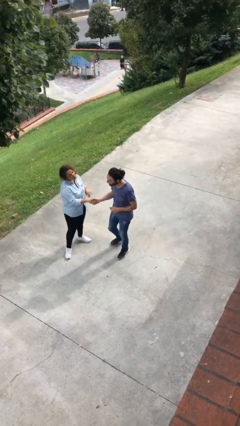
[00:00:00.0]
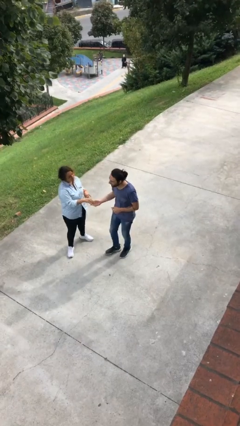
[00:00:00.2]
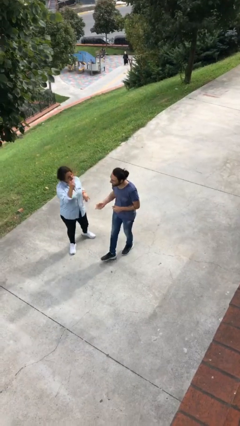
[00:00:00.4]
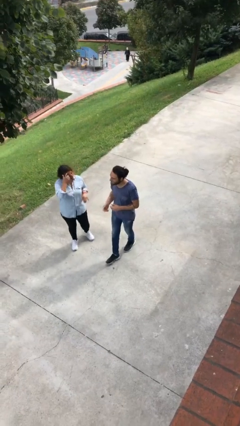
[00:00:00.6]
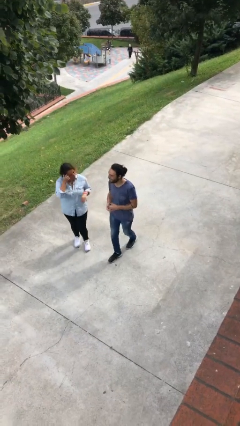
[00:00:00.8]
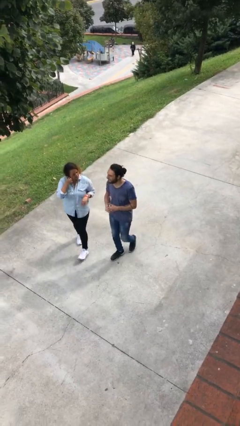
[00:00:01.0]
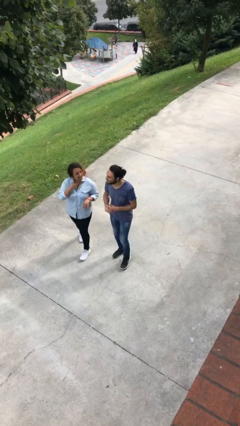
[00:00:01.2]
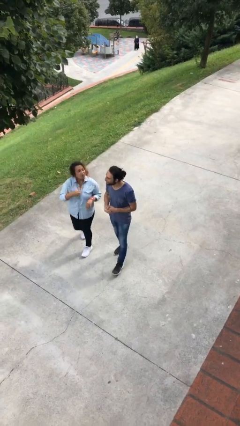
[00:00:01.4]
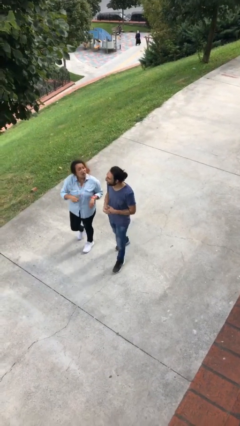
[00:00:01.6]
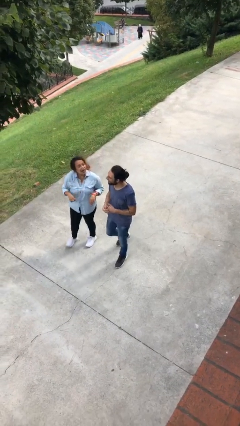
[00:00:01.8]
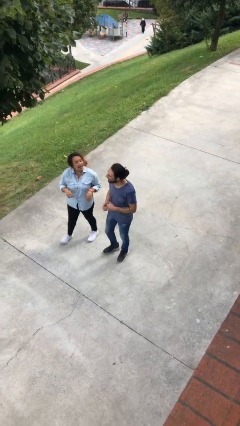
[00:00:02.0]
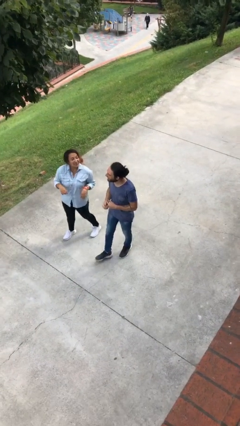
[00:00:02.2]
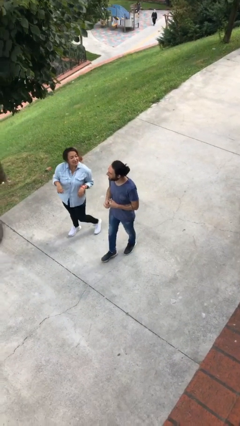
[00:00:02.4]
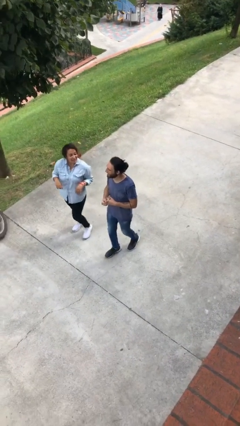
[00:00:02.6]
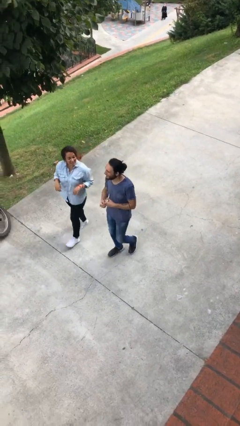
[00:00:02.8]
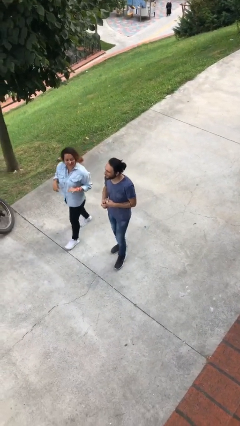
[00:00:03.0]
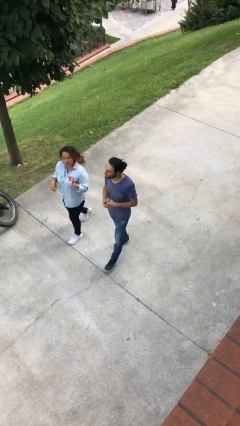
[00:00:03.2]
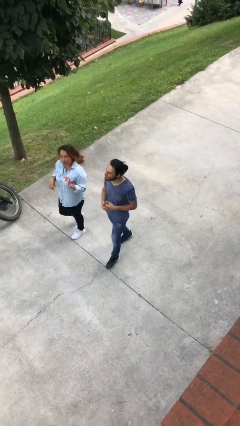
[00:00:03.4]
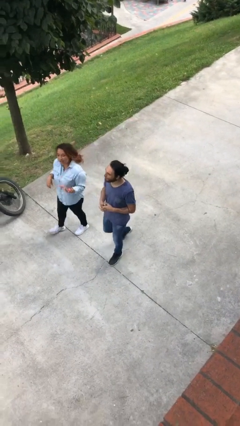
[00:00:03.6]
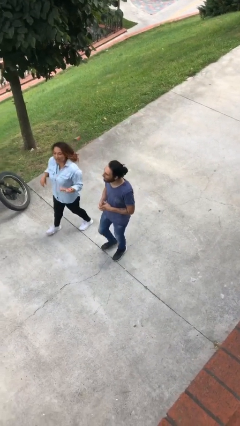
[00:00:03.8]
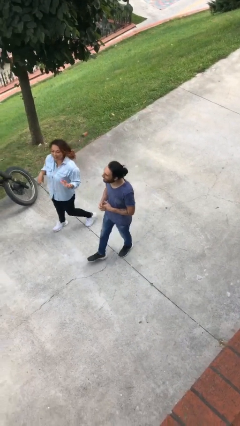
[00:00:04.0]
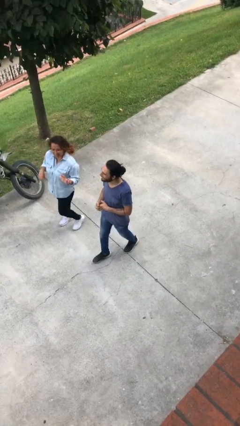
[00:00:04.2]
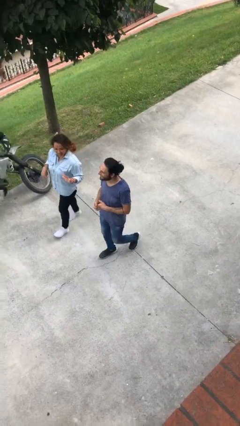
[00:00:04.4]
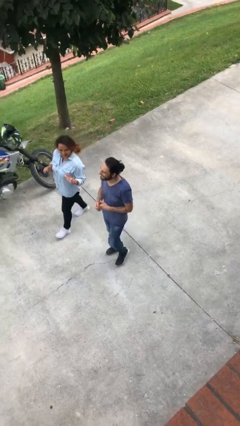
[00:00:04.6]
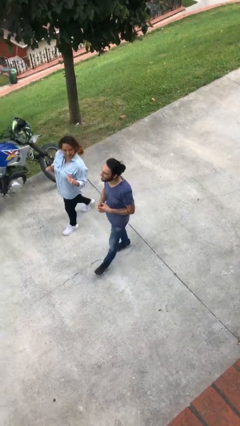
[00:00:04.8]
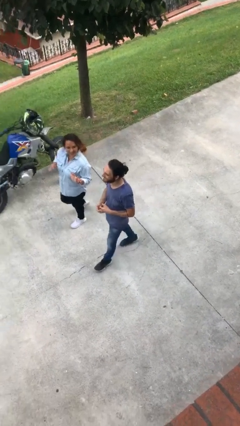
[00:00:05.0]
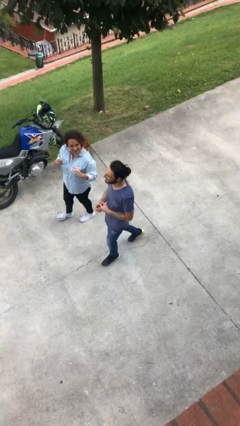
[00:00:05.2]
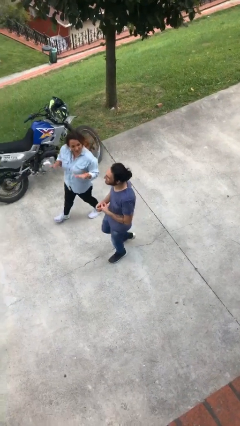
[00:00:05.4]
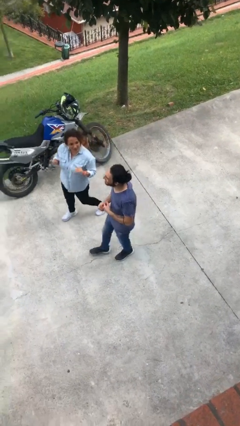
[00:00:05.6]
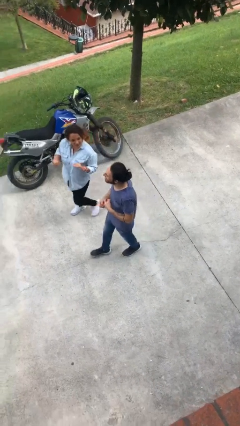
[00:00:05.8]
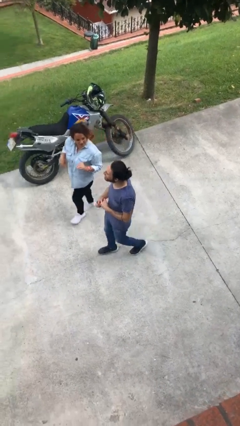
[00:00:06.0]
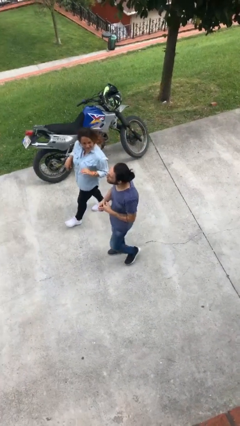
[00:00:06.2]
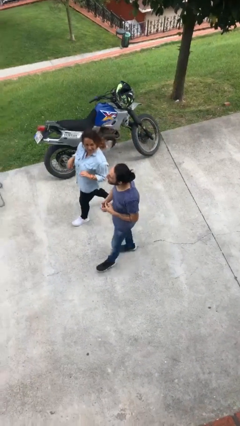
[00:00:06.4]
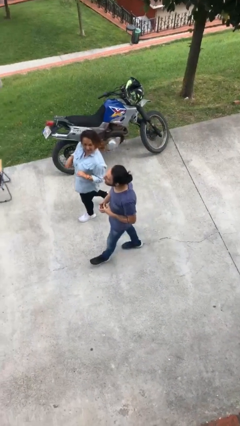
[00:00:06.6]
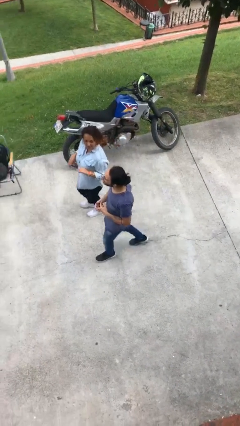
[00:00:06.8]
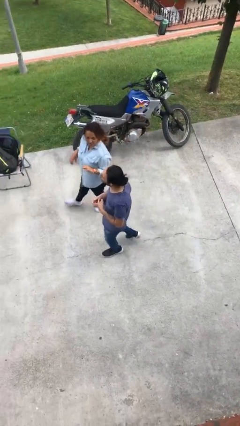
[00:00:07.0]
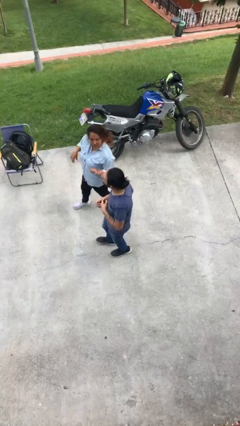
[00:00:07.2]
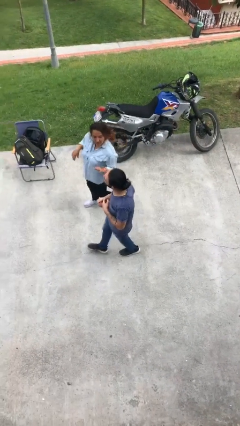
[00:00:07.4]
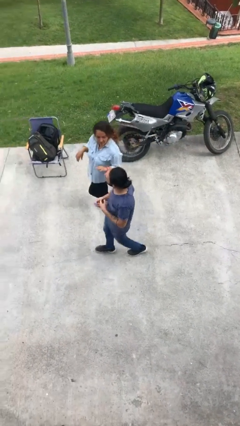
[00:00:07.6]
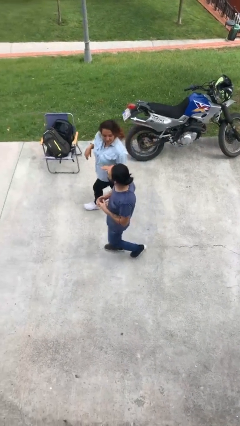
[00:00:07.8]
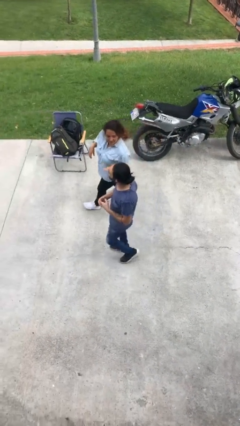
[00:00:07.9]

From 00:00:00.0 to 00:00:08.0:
person talks to person

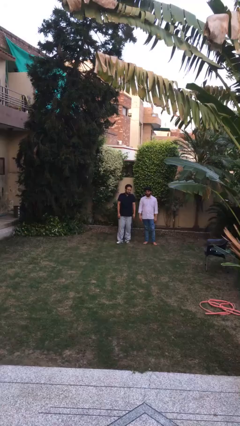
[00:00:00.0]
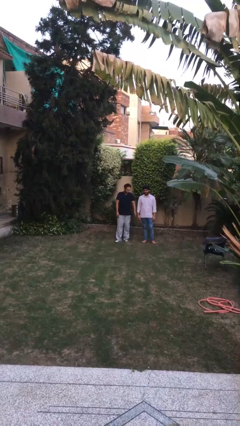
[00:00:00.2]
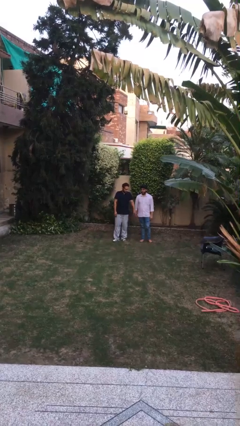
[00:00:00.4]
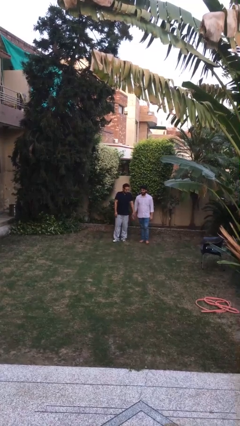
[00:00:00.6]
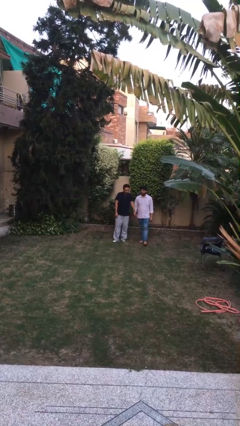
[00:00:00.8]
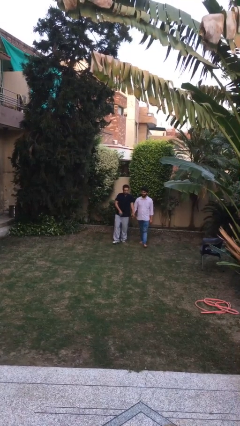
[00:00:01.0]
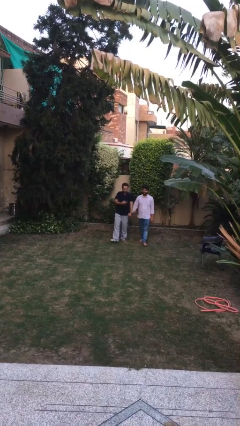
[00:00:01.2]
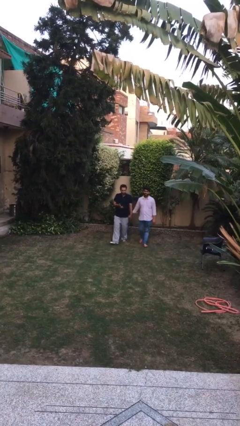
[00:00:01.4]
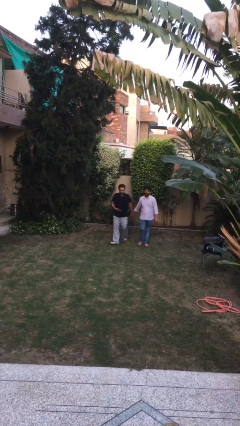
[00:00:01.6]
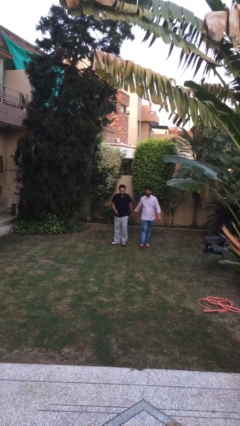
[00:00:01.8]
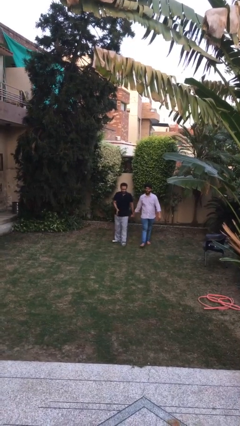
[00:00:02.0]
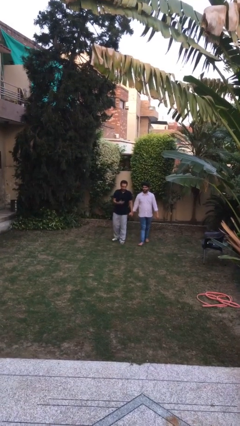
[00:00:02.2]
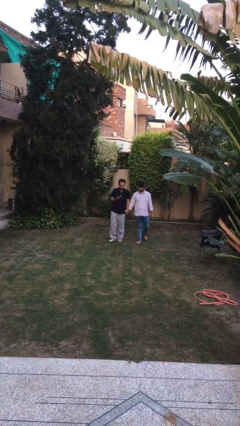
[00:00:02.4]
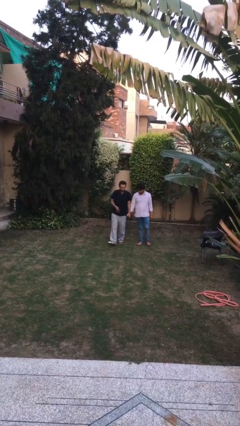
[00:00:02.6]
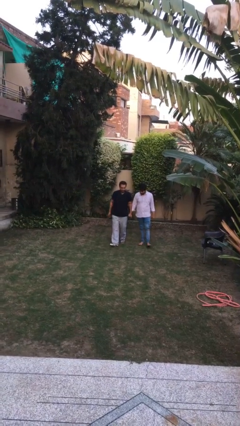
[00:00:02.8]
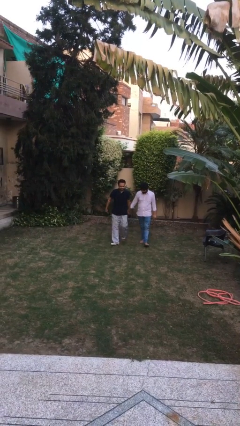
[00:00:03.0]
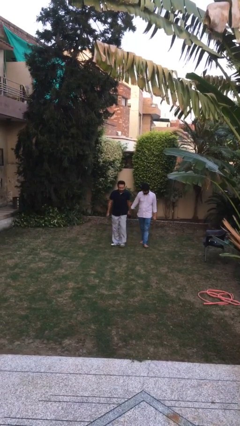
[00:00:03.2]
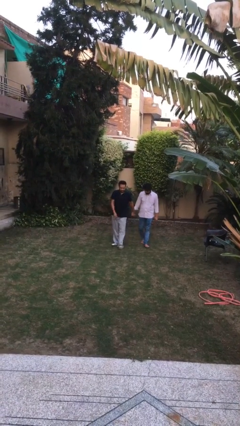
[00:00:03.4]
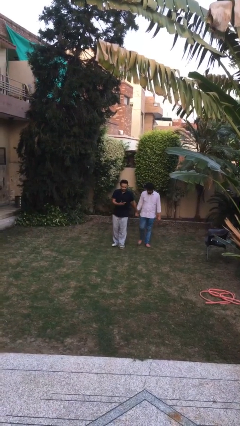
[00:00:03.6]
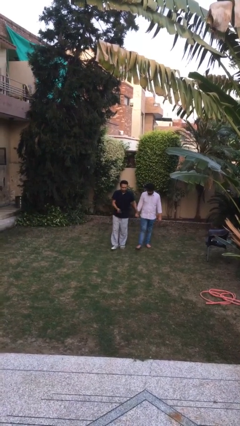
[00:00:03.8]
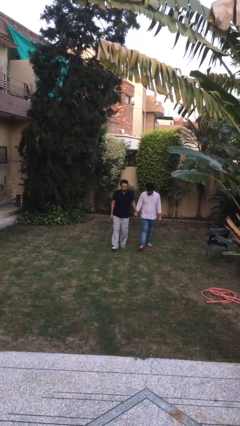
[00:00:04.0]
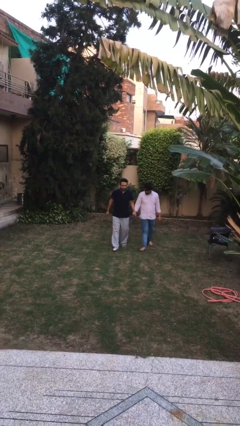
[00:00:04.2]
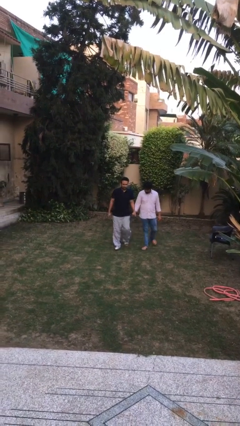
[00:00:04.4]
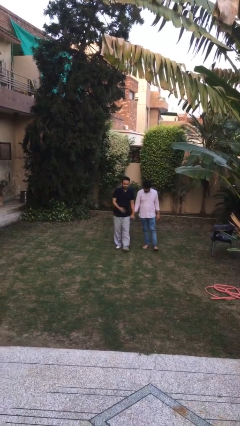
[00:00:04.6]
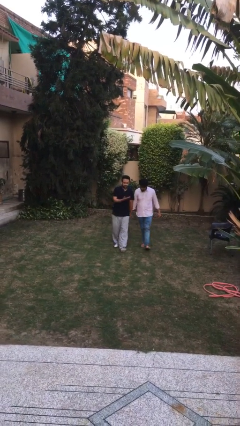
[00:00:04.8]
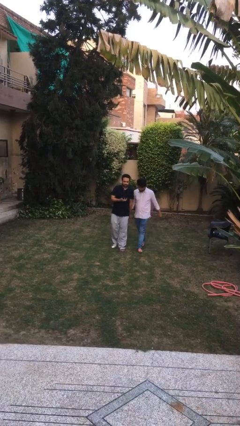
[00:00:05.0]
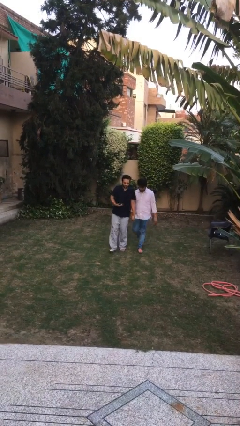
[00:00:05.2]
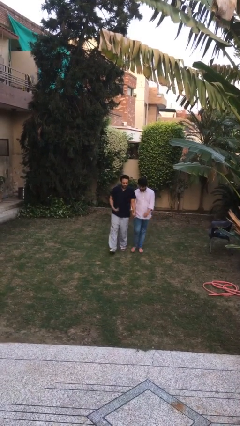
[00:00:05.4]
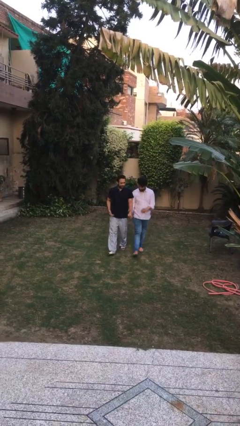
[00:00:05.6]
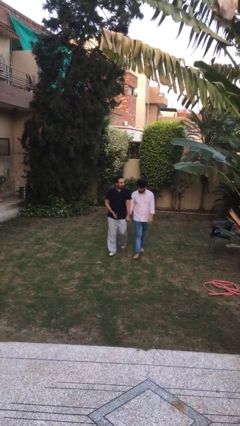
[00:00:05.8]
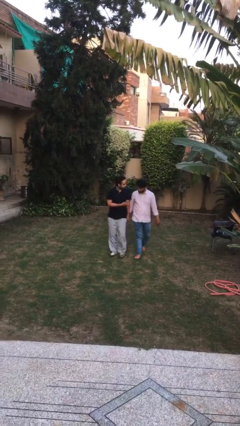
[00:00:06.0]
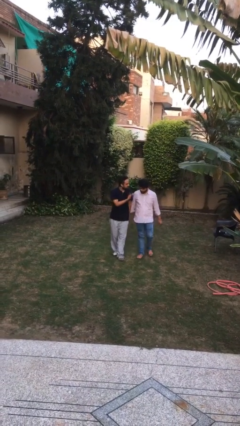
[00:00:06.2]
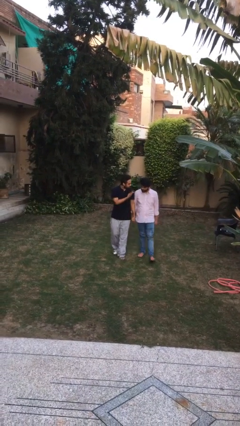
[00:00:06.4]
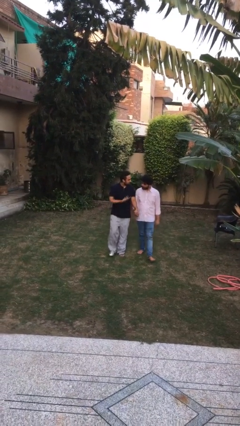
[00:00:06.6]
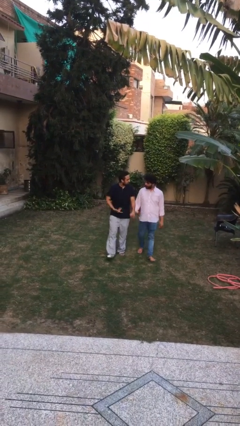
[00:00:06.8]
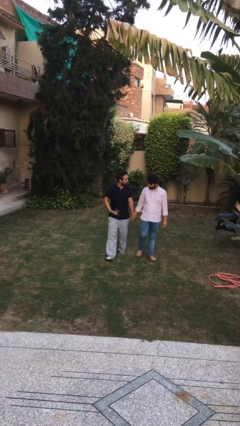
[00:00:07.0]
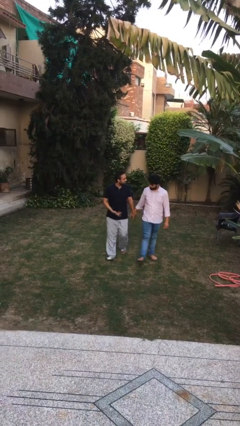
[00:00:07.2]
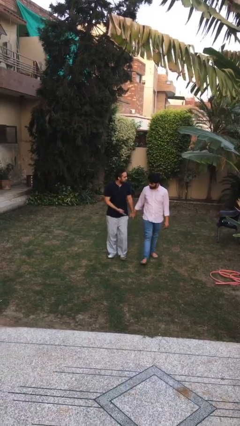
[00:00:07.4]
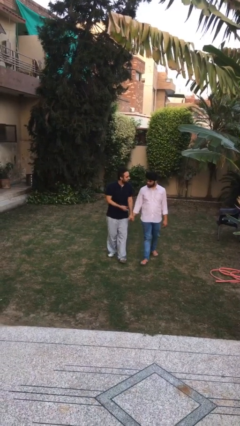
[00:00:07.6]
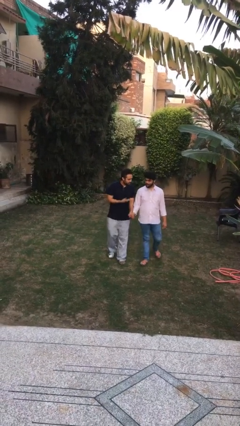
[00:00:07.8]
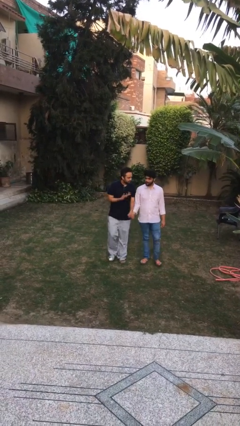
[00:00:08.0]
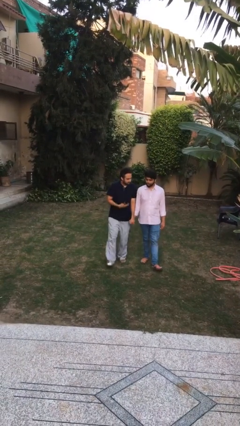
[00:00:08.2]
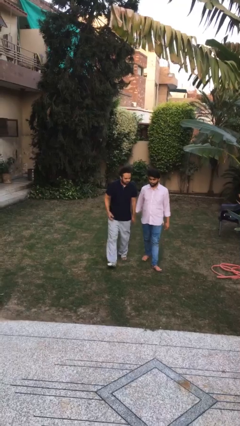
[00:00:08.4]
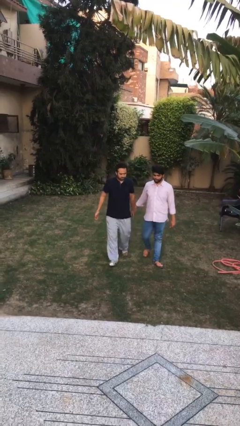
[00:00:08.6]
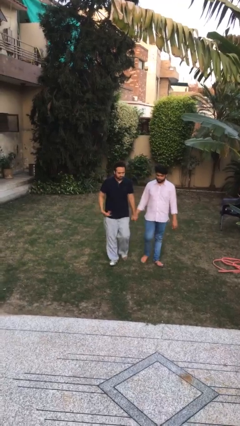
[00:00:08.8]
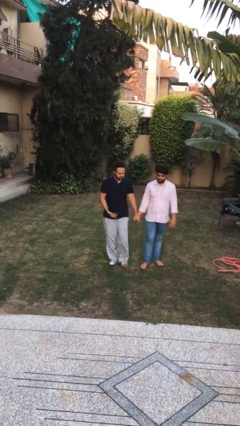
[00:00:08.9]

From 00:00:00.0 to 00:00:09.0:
person holds hand

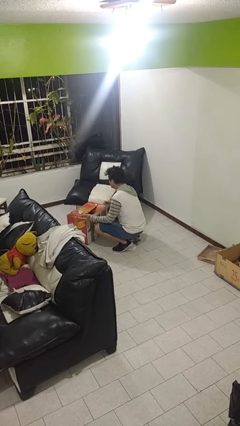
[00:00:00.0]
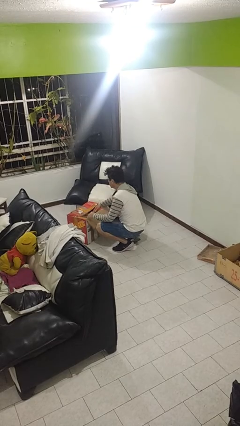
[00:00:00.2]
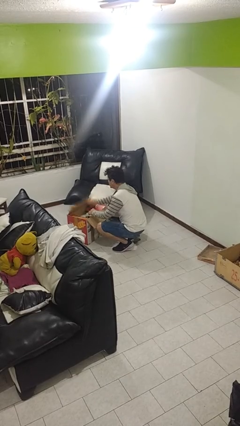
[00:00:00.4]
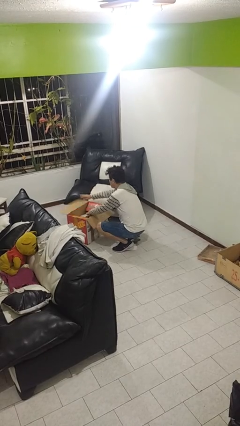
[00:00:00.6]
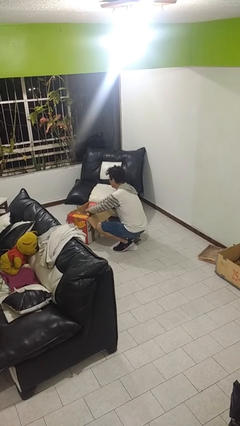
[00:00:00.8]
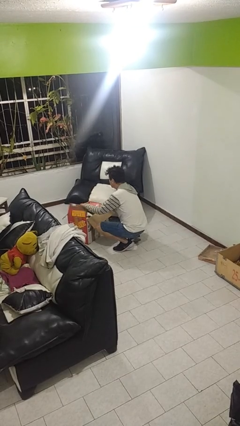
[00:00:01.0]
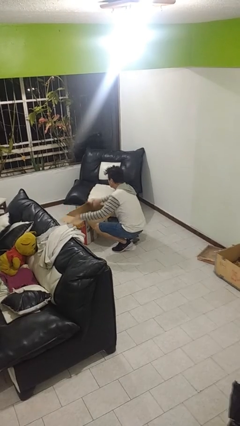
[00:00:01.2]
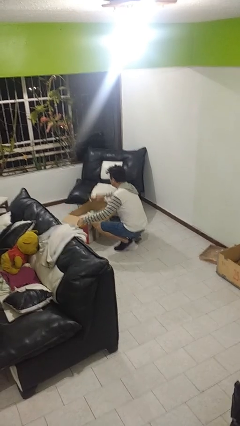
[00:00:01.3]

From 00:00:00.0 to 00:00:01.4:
person opens box
